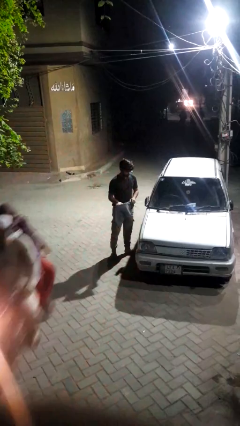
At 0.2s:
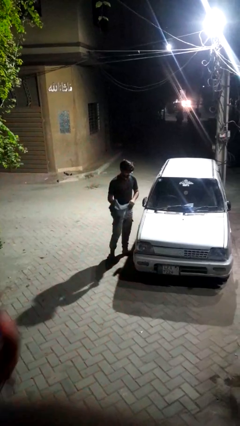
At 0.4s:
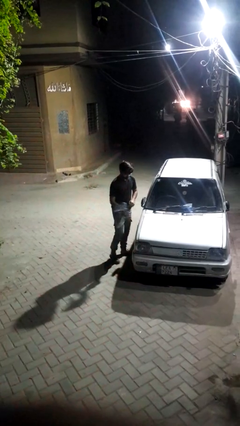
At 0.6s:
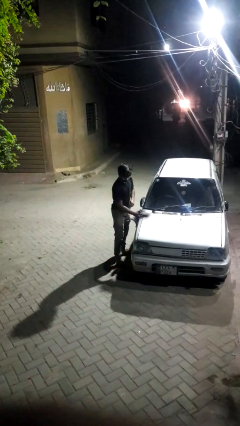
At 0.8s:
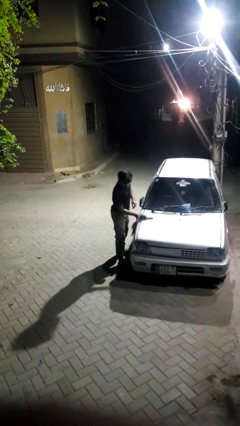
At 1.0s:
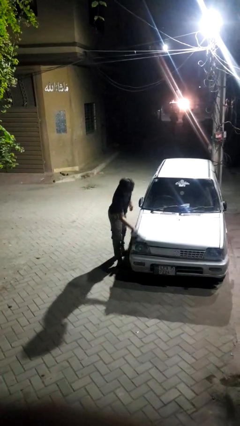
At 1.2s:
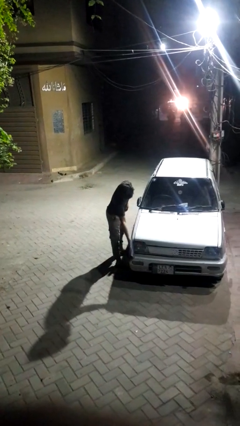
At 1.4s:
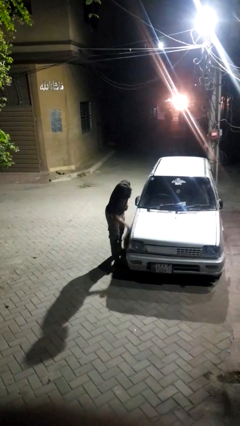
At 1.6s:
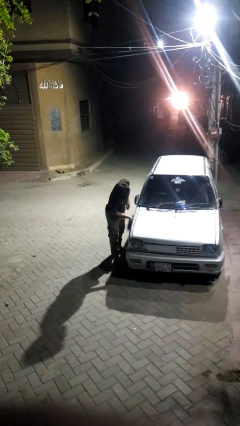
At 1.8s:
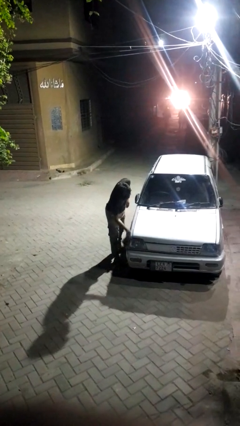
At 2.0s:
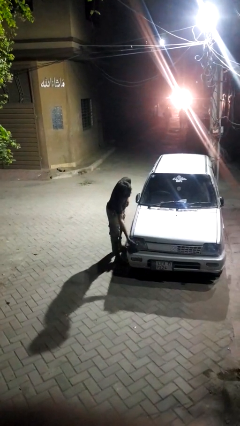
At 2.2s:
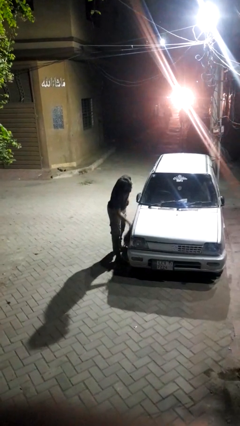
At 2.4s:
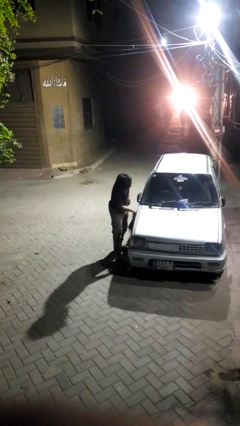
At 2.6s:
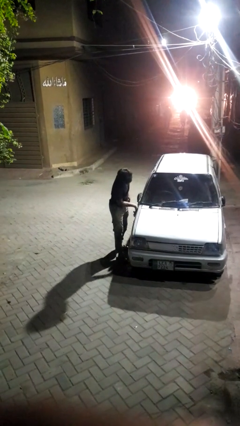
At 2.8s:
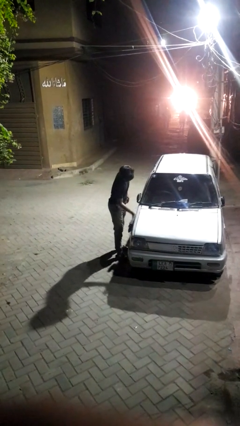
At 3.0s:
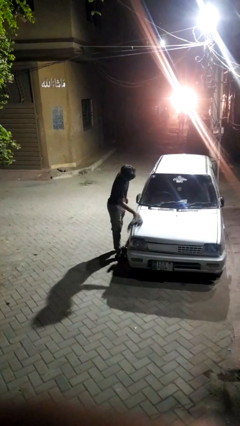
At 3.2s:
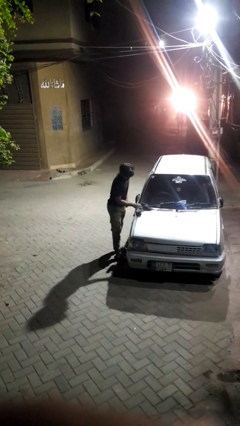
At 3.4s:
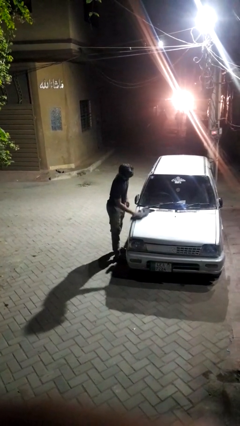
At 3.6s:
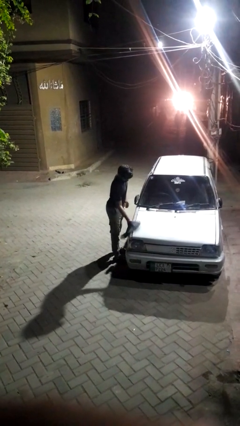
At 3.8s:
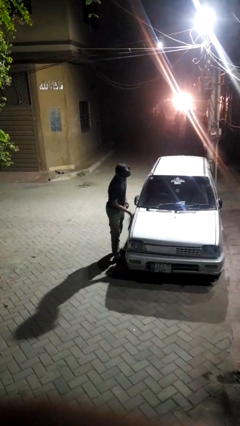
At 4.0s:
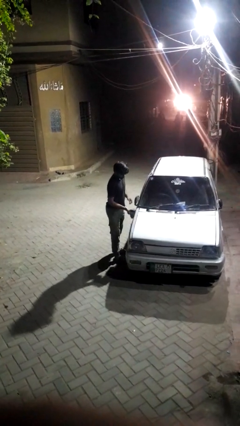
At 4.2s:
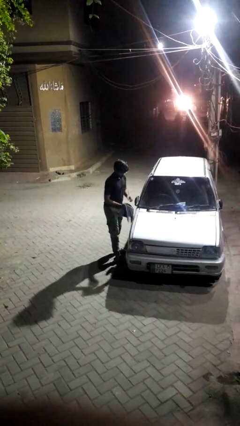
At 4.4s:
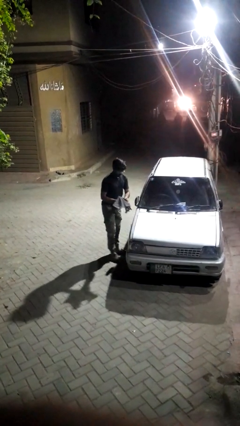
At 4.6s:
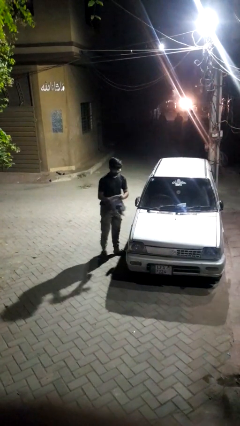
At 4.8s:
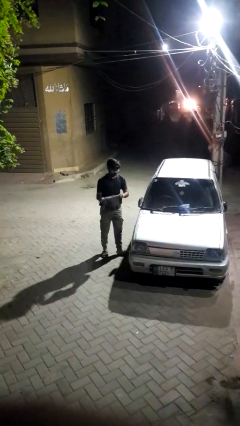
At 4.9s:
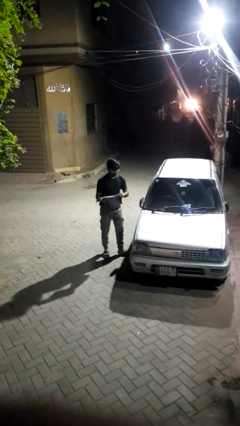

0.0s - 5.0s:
person polishes car with rag

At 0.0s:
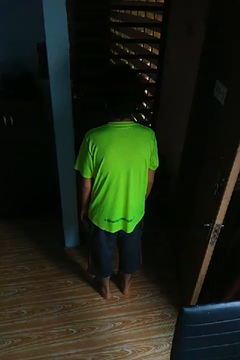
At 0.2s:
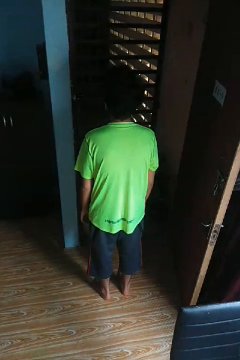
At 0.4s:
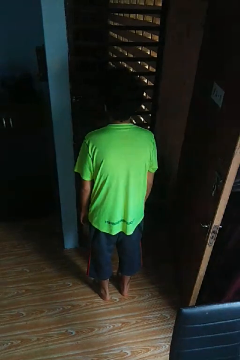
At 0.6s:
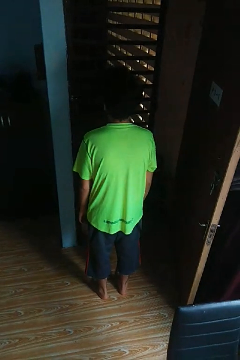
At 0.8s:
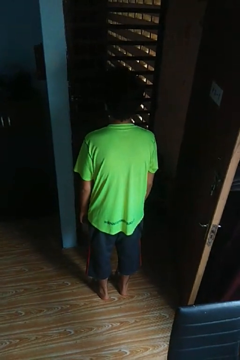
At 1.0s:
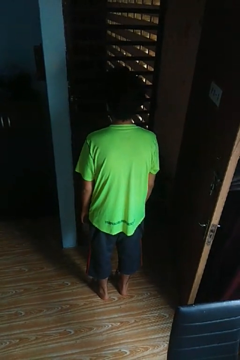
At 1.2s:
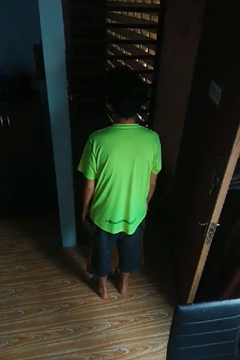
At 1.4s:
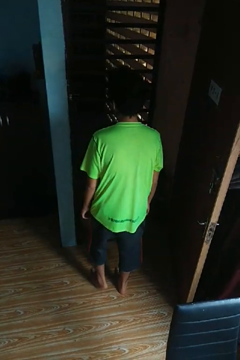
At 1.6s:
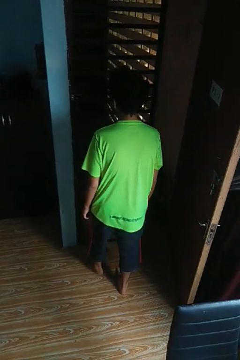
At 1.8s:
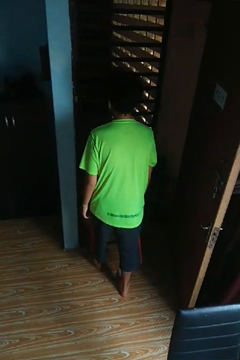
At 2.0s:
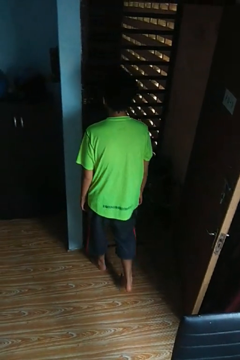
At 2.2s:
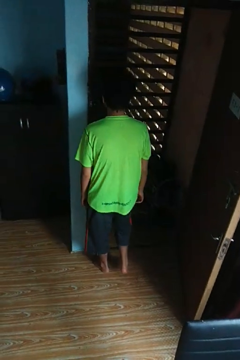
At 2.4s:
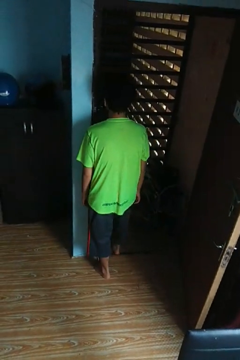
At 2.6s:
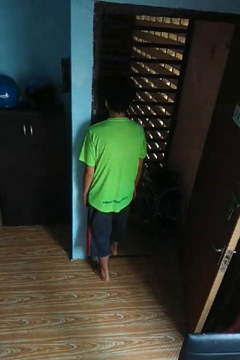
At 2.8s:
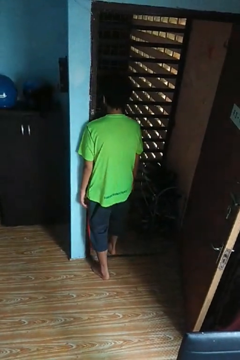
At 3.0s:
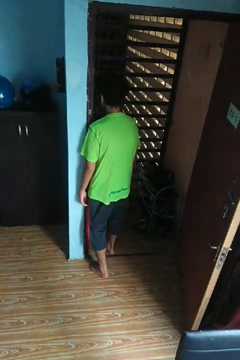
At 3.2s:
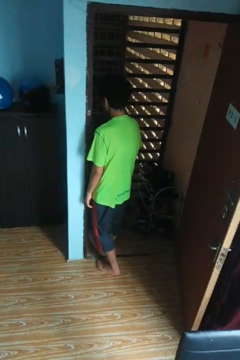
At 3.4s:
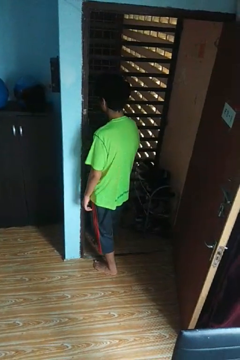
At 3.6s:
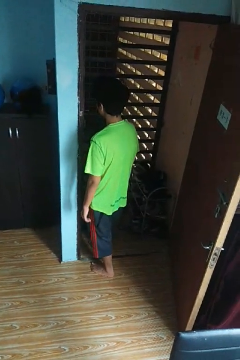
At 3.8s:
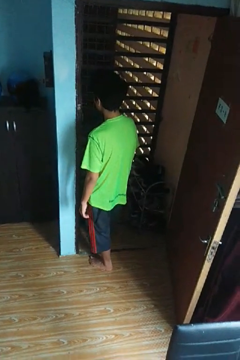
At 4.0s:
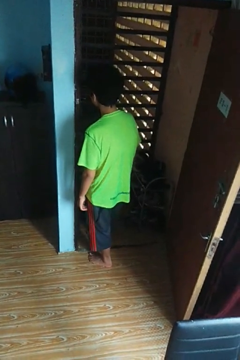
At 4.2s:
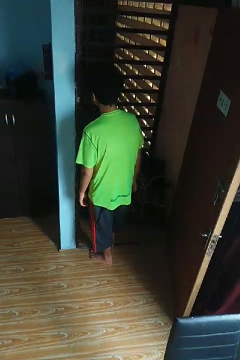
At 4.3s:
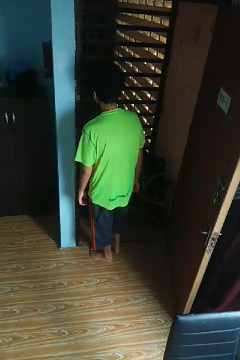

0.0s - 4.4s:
person bumps into wall

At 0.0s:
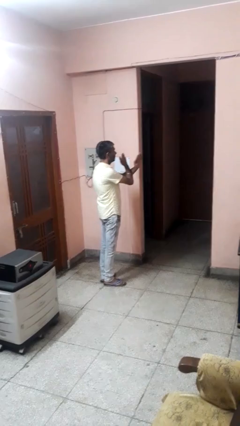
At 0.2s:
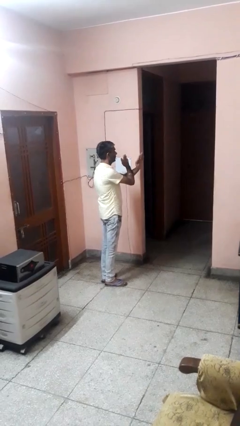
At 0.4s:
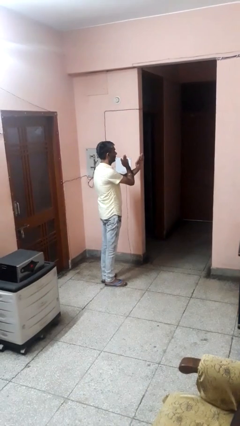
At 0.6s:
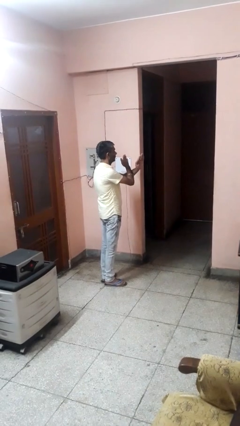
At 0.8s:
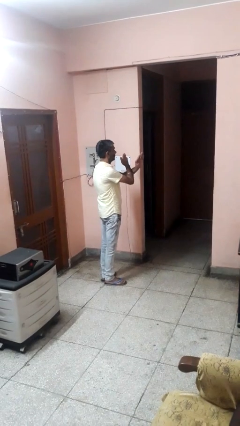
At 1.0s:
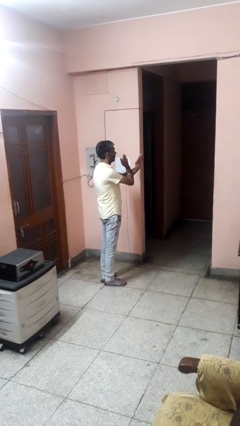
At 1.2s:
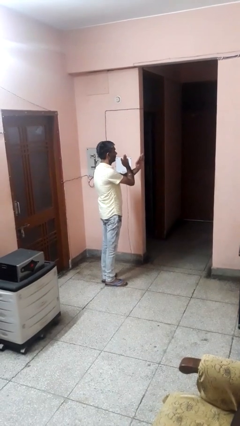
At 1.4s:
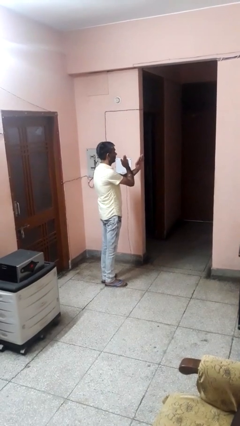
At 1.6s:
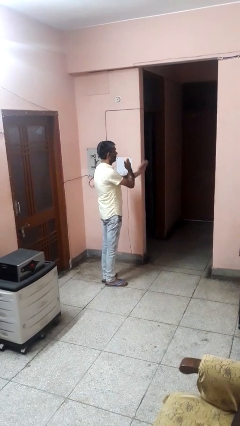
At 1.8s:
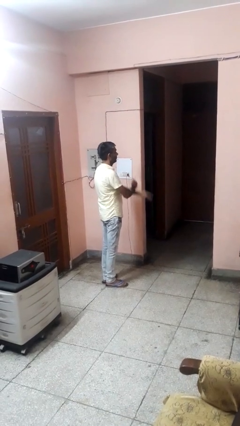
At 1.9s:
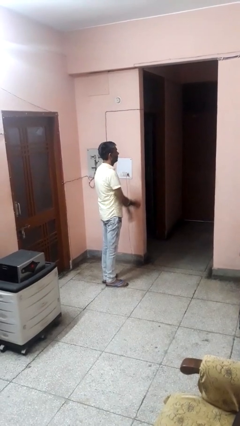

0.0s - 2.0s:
person gestures arms x

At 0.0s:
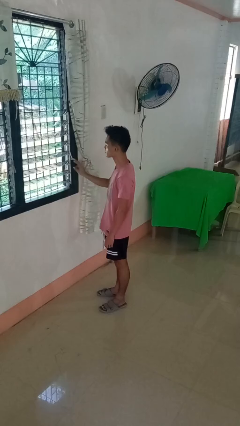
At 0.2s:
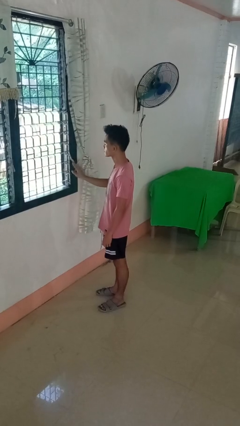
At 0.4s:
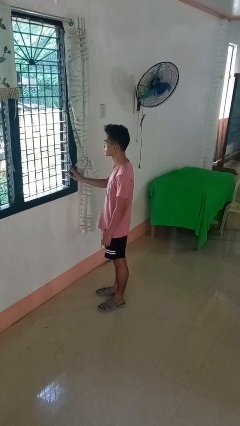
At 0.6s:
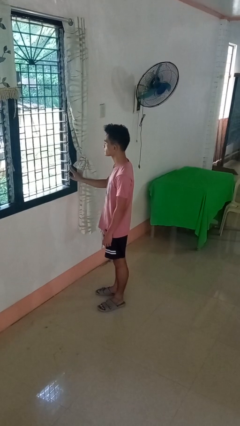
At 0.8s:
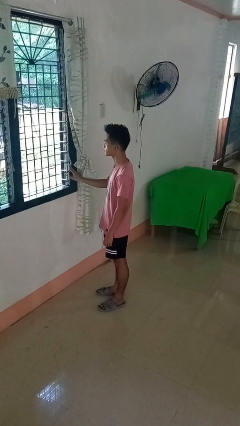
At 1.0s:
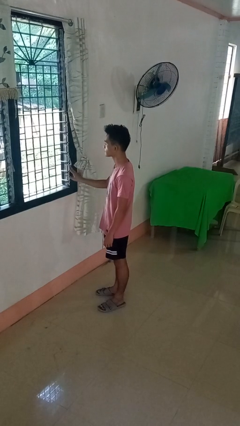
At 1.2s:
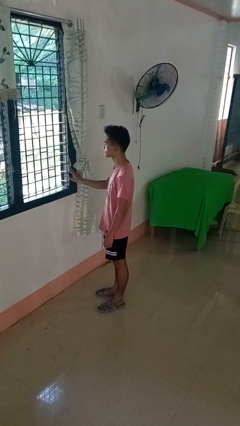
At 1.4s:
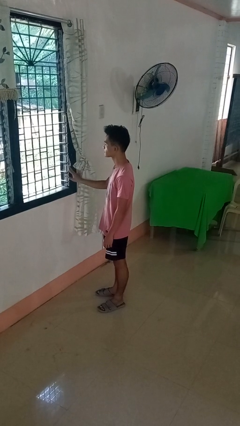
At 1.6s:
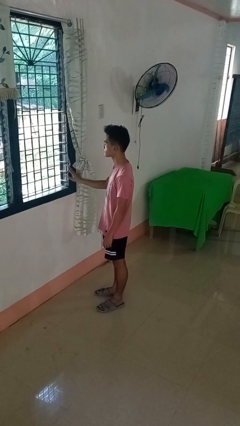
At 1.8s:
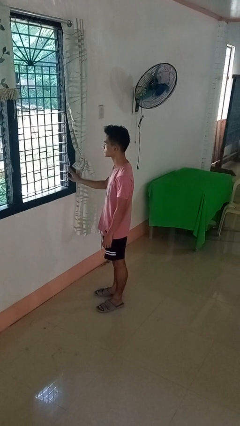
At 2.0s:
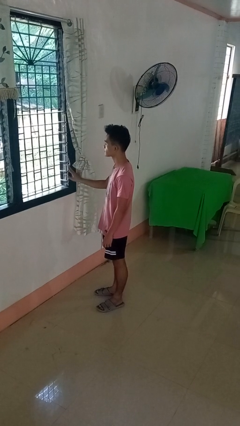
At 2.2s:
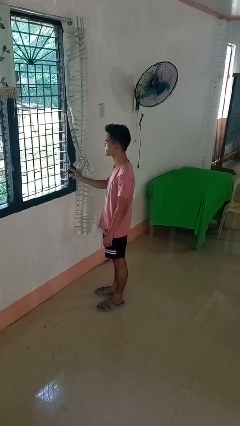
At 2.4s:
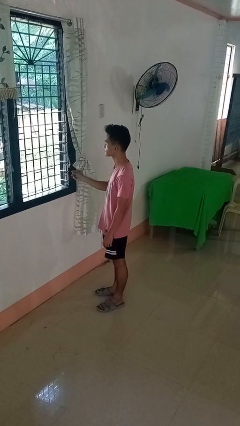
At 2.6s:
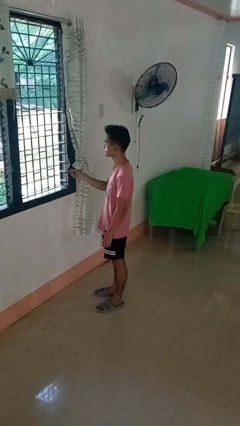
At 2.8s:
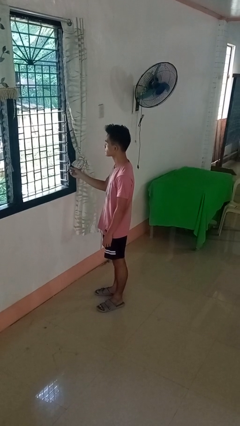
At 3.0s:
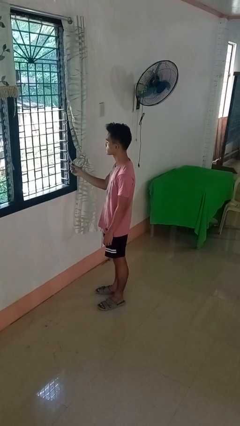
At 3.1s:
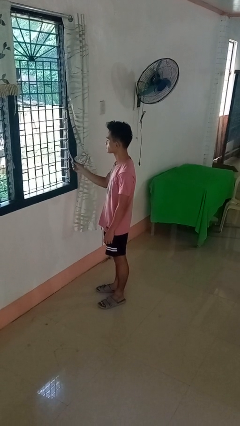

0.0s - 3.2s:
person opens home window

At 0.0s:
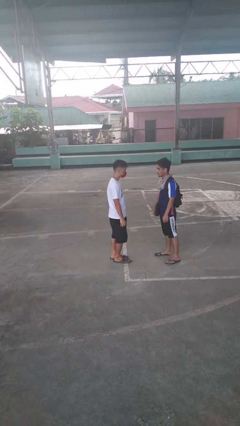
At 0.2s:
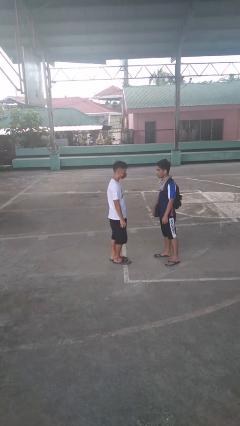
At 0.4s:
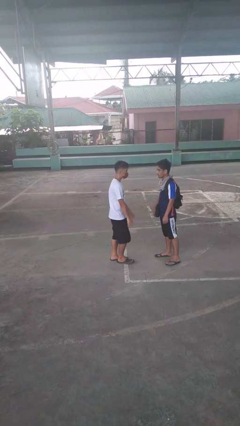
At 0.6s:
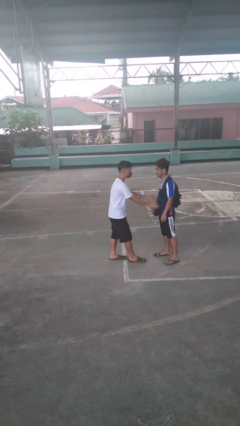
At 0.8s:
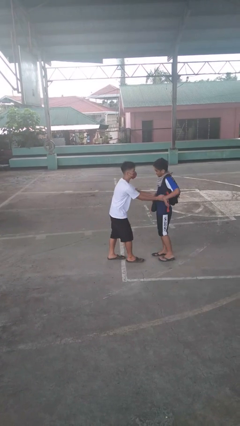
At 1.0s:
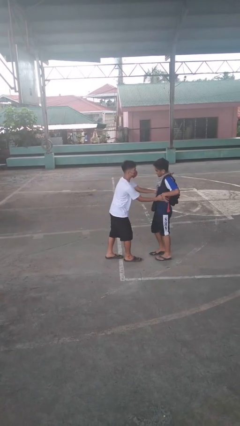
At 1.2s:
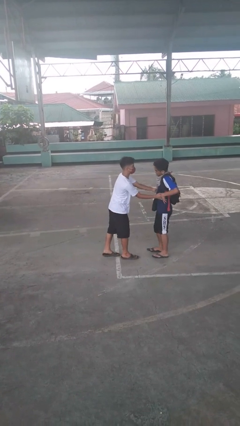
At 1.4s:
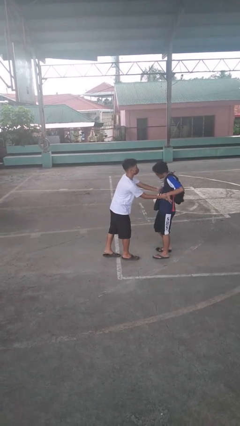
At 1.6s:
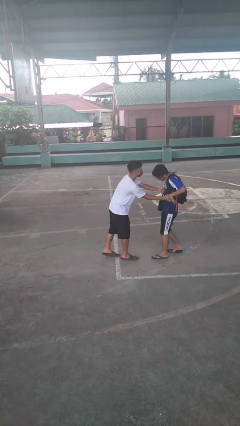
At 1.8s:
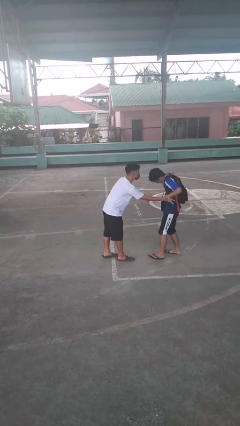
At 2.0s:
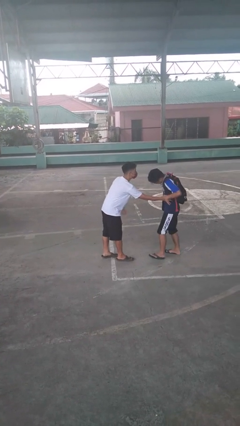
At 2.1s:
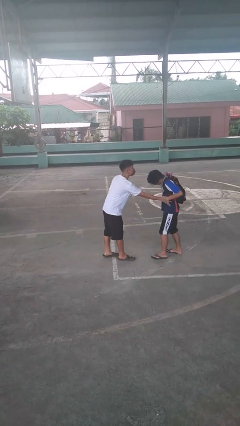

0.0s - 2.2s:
person tickles person

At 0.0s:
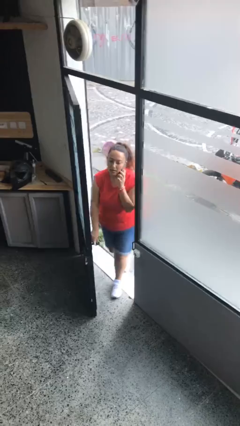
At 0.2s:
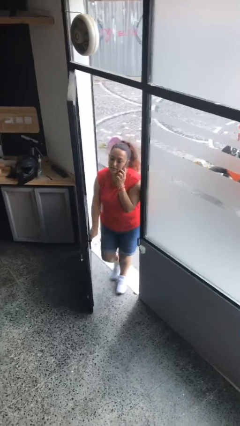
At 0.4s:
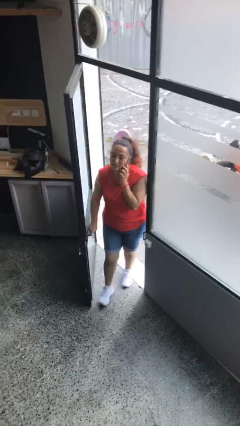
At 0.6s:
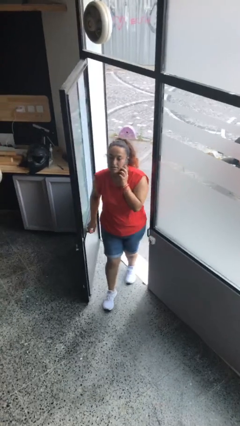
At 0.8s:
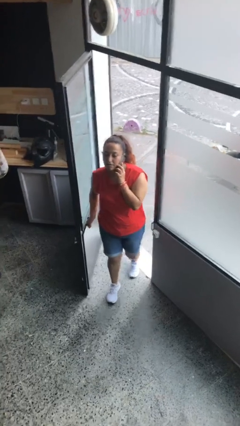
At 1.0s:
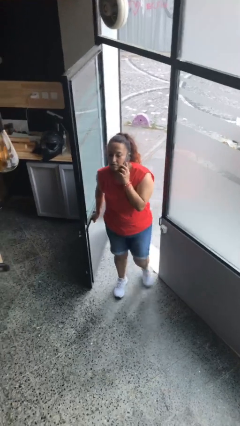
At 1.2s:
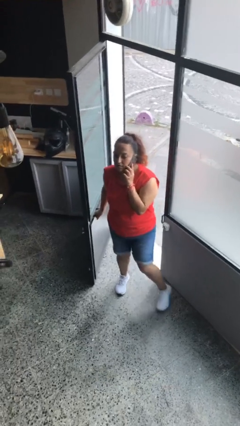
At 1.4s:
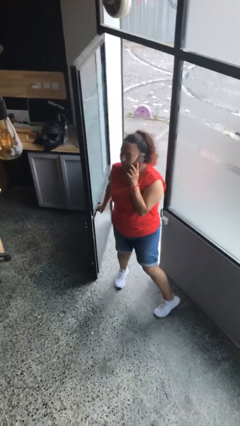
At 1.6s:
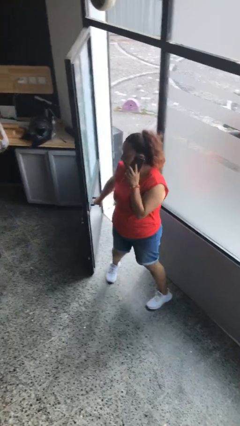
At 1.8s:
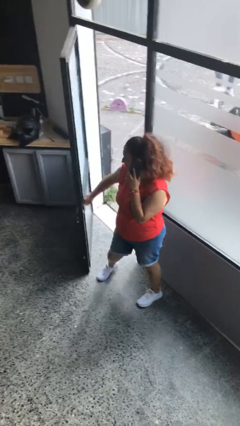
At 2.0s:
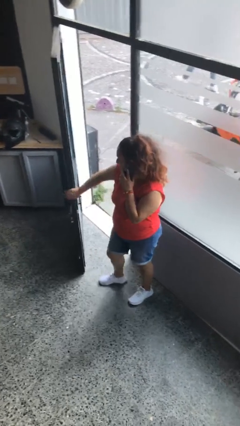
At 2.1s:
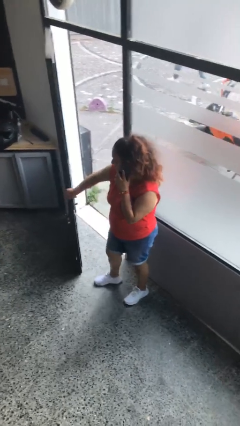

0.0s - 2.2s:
person enters scene through structure
